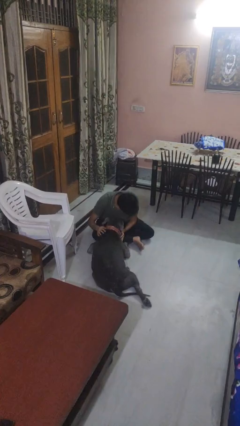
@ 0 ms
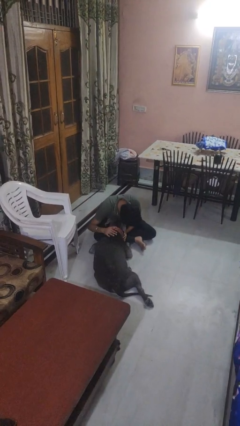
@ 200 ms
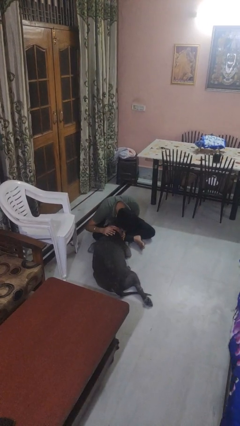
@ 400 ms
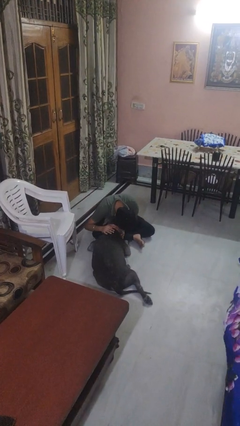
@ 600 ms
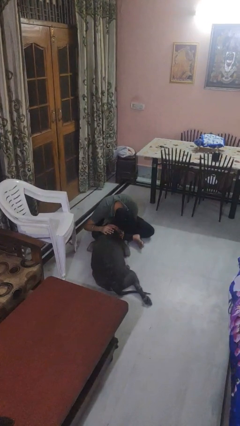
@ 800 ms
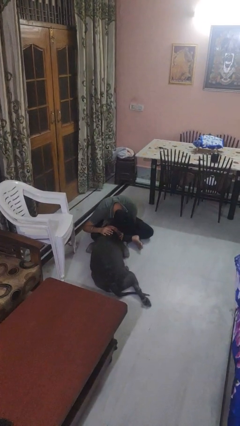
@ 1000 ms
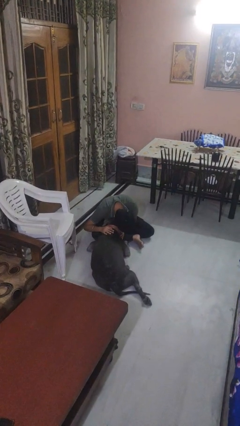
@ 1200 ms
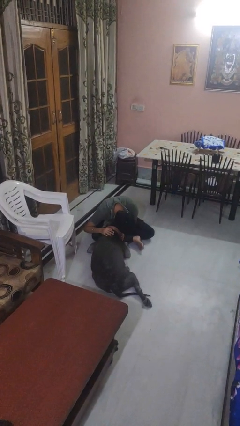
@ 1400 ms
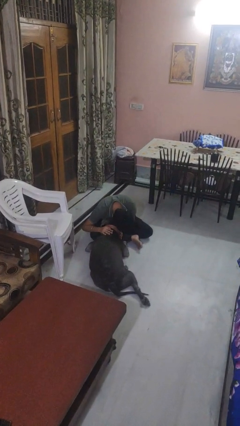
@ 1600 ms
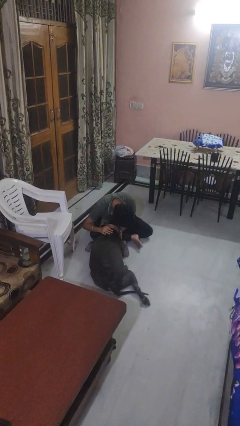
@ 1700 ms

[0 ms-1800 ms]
person hugs dog

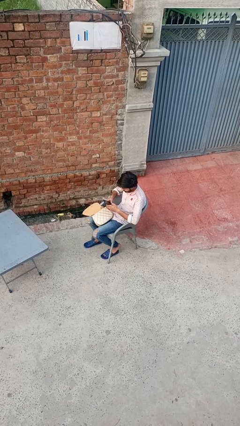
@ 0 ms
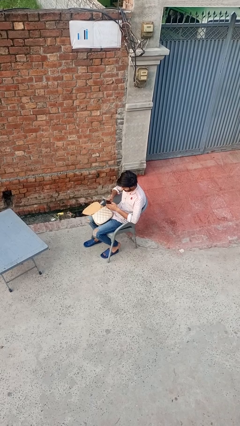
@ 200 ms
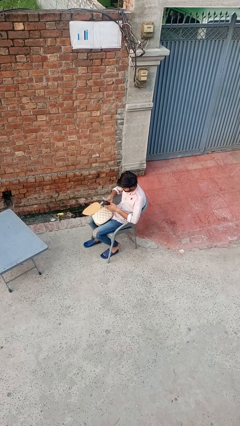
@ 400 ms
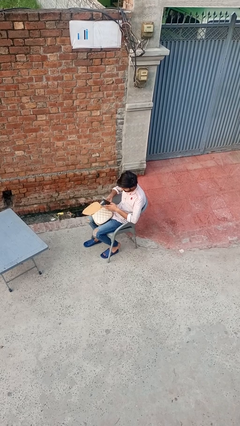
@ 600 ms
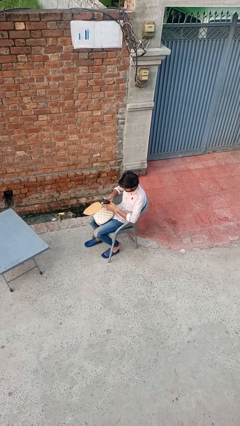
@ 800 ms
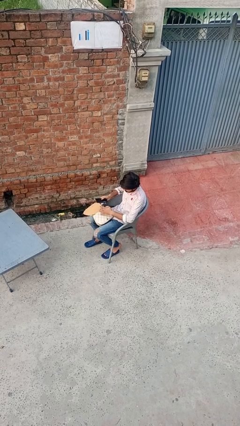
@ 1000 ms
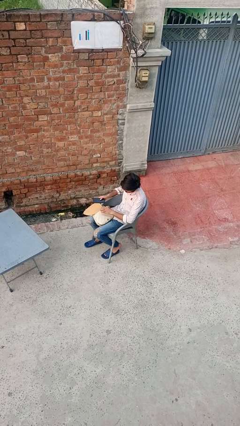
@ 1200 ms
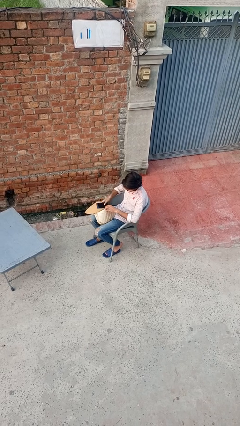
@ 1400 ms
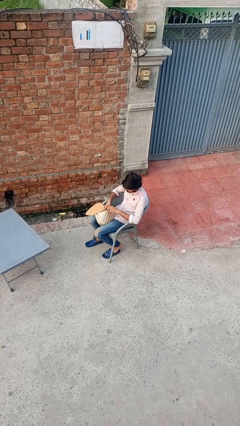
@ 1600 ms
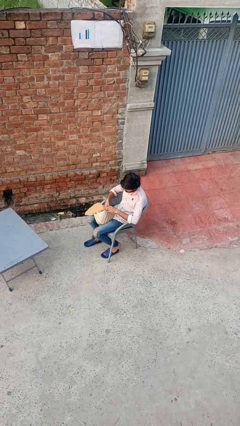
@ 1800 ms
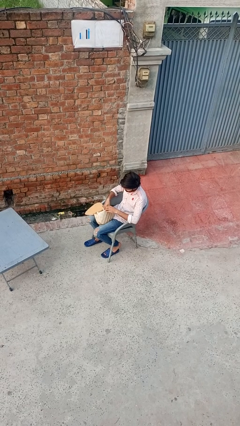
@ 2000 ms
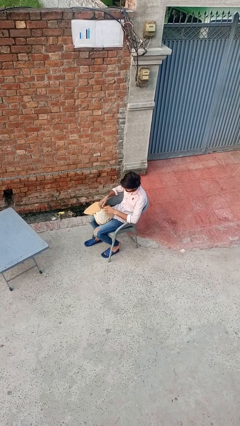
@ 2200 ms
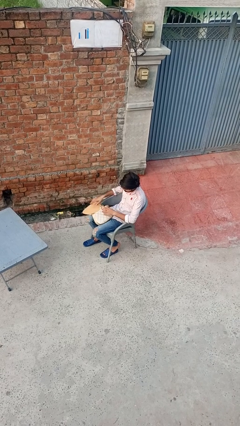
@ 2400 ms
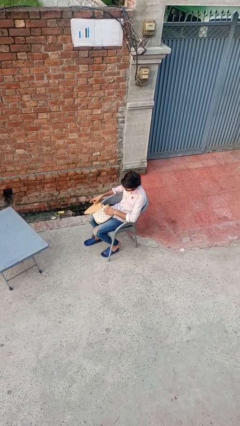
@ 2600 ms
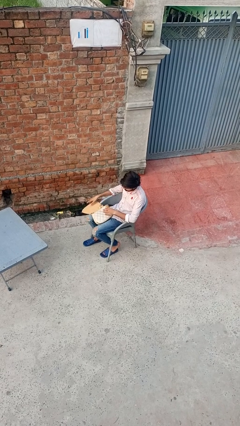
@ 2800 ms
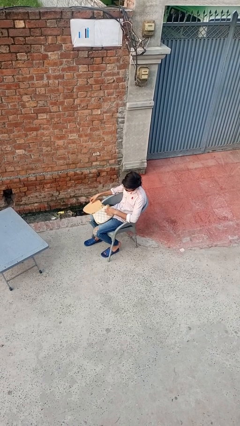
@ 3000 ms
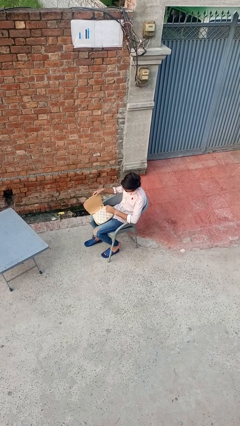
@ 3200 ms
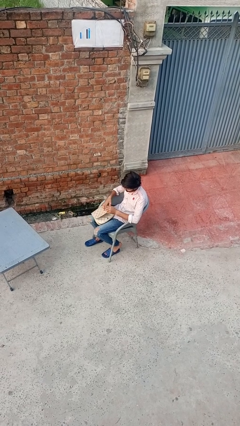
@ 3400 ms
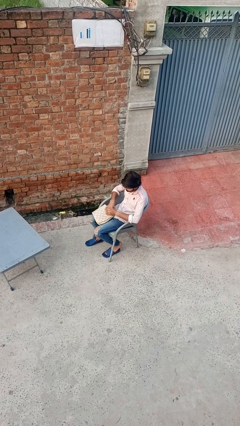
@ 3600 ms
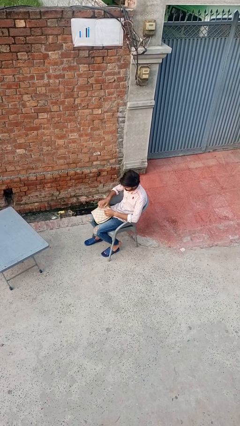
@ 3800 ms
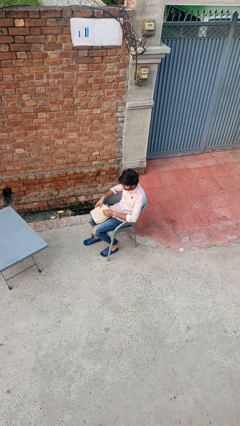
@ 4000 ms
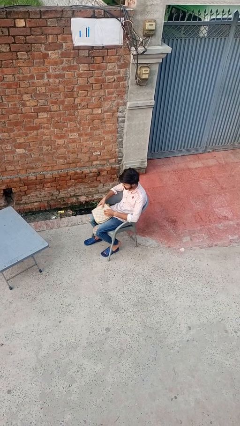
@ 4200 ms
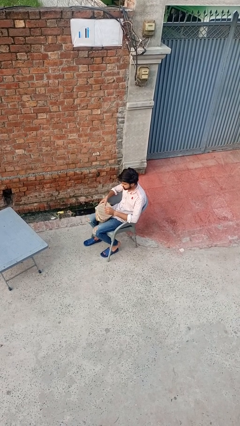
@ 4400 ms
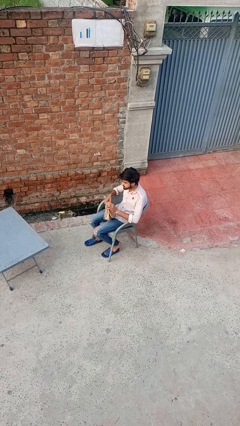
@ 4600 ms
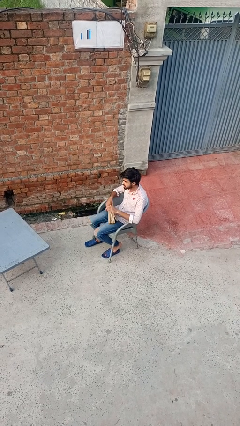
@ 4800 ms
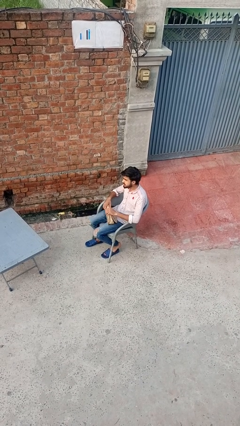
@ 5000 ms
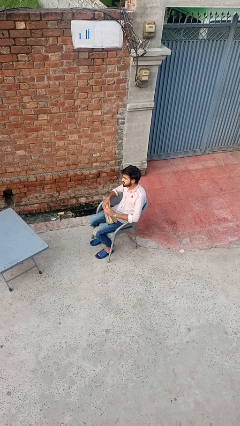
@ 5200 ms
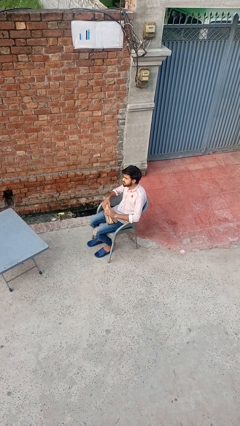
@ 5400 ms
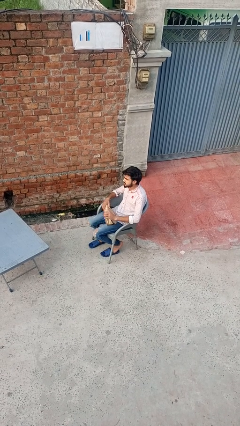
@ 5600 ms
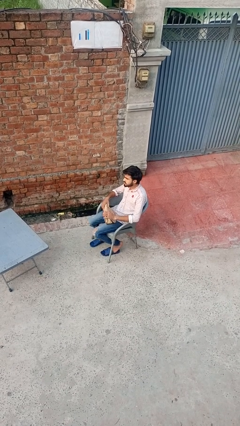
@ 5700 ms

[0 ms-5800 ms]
person puts object into purse

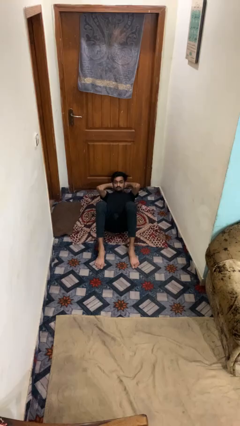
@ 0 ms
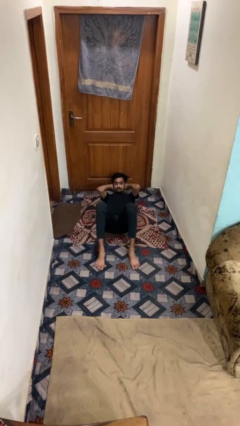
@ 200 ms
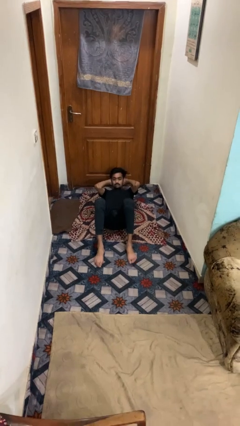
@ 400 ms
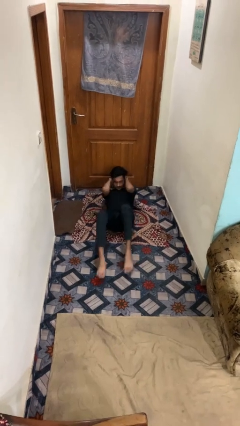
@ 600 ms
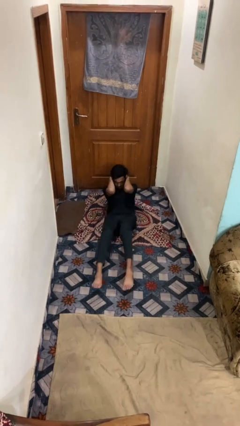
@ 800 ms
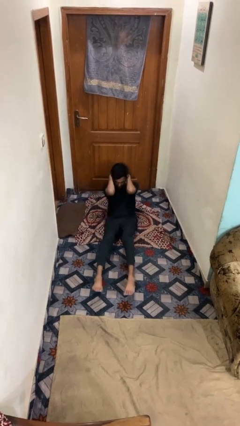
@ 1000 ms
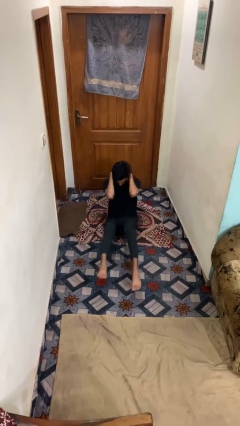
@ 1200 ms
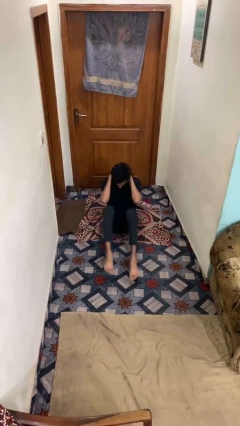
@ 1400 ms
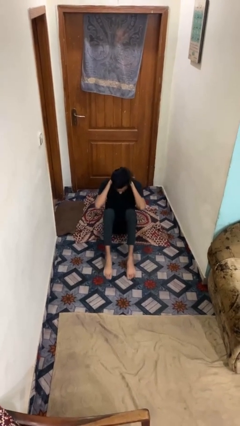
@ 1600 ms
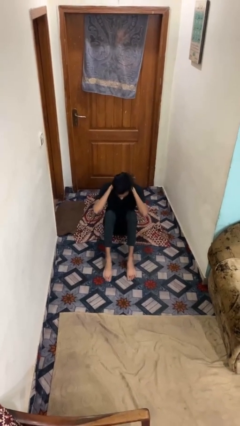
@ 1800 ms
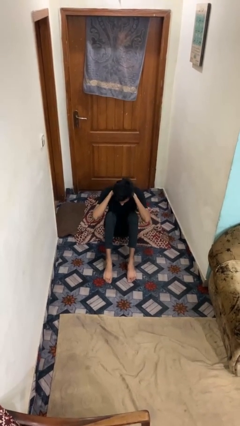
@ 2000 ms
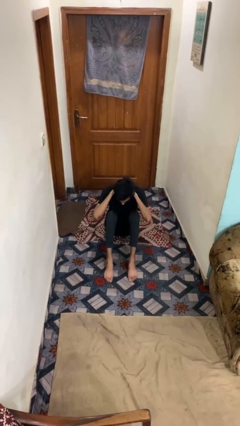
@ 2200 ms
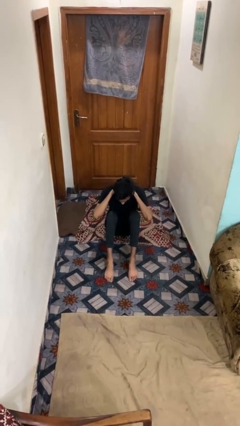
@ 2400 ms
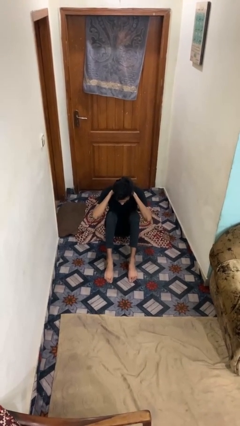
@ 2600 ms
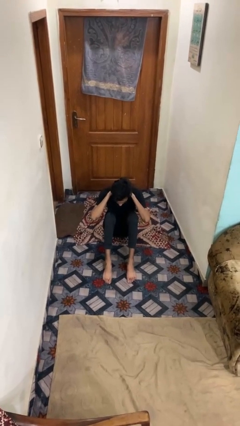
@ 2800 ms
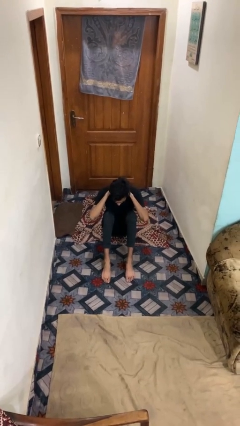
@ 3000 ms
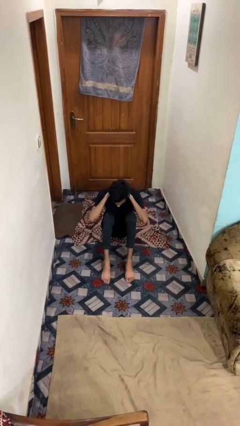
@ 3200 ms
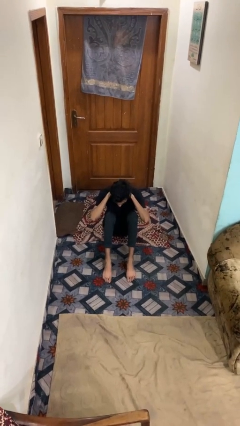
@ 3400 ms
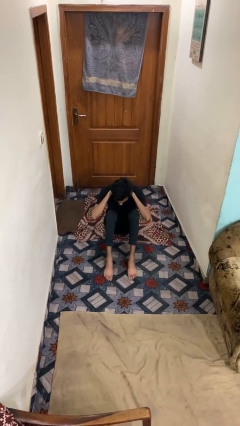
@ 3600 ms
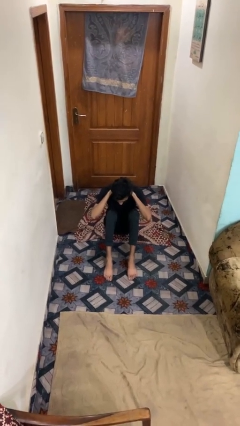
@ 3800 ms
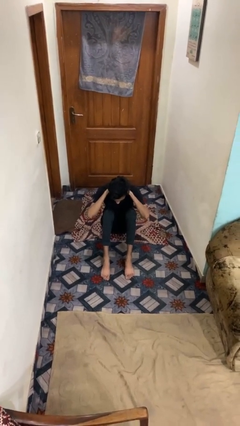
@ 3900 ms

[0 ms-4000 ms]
person exercises with situp

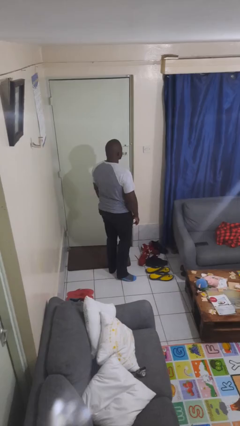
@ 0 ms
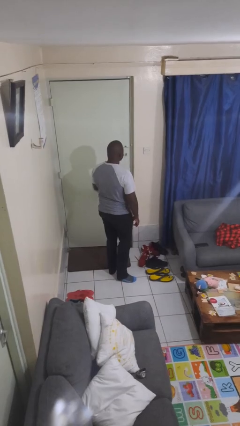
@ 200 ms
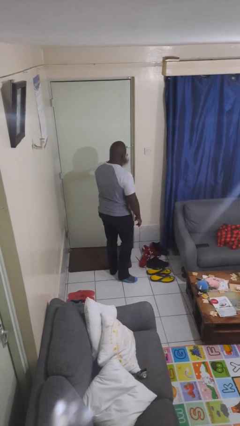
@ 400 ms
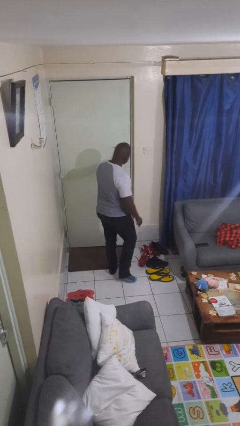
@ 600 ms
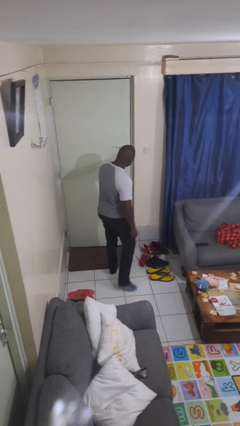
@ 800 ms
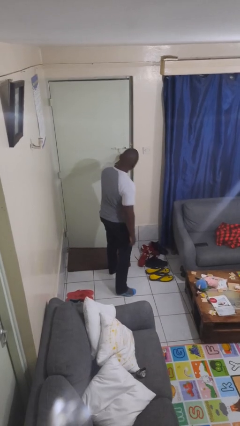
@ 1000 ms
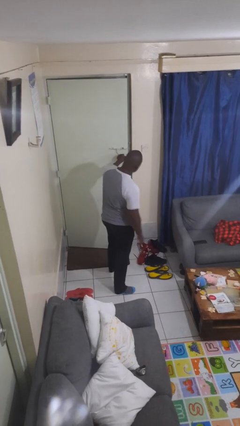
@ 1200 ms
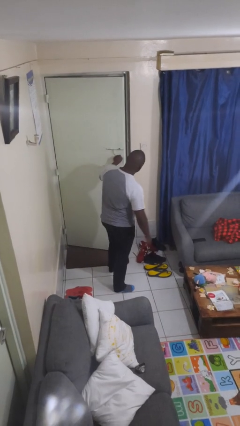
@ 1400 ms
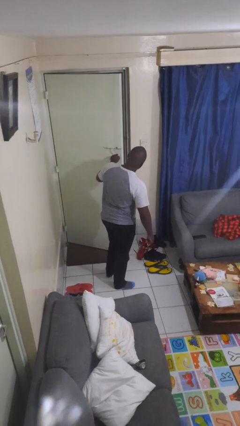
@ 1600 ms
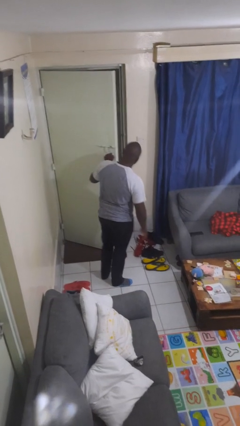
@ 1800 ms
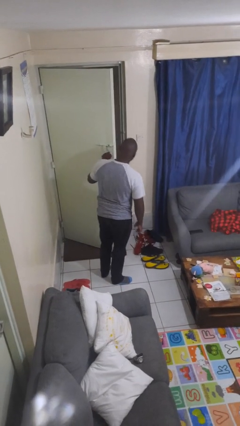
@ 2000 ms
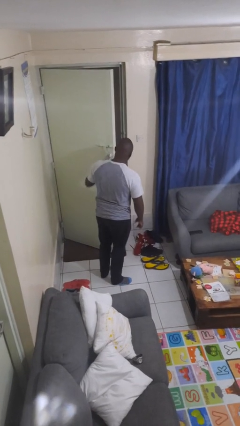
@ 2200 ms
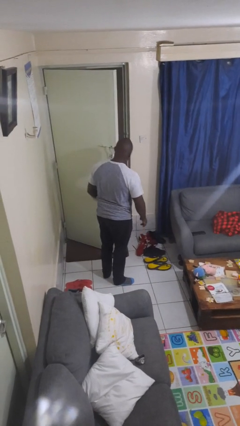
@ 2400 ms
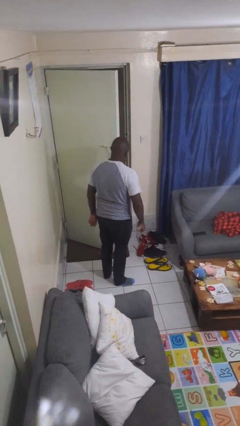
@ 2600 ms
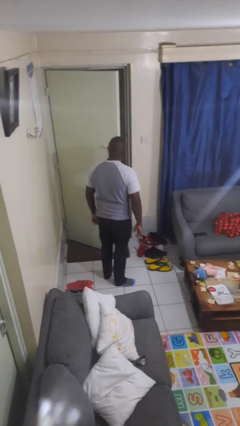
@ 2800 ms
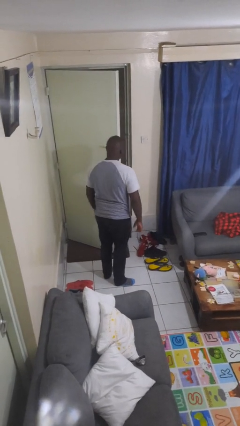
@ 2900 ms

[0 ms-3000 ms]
person opens facility door

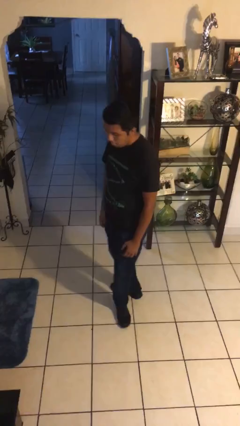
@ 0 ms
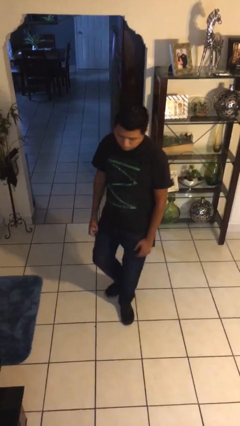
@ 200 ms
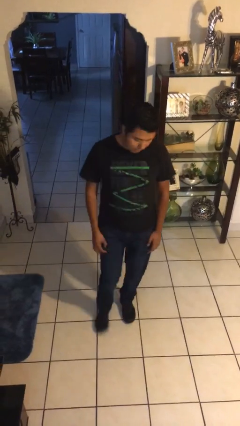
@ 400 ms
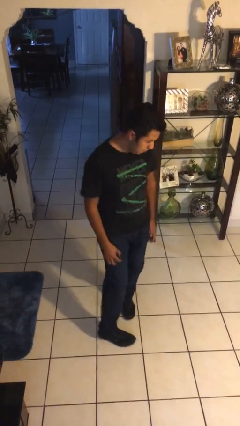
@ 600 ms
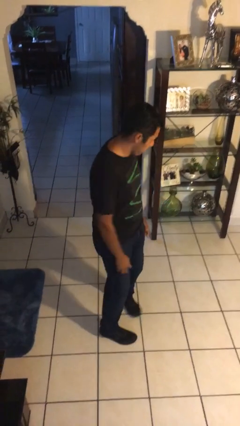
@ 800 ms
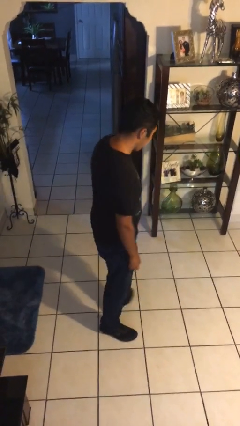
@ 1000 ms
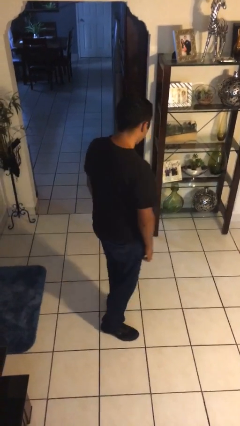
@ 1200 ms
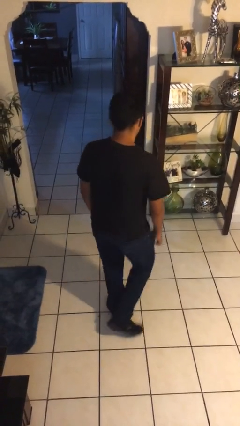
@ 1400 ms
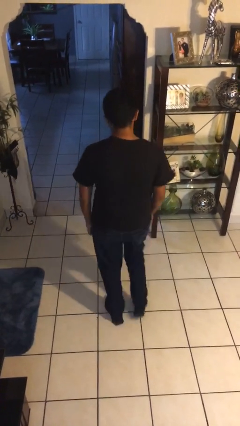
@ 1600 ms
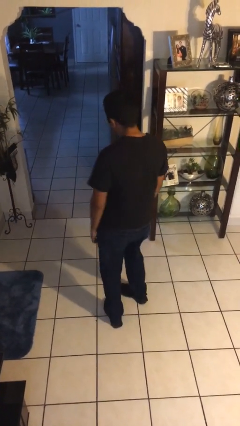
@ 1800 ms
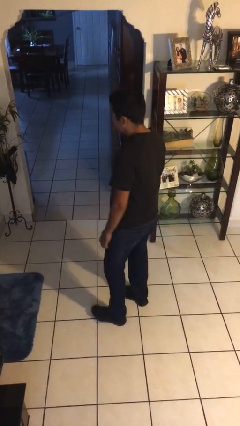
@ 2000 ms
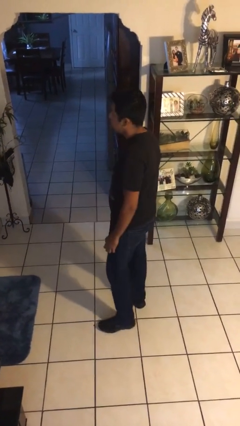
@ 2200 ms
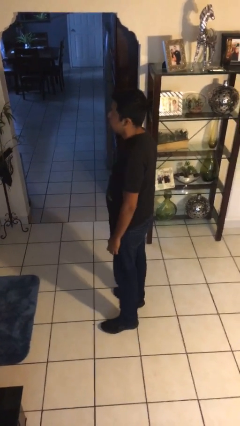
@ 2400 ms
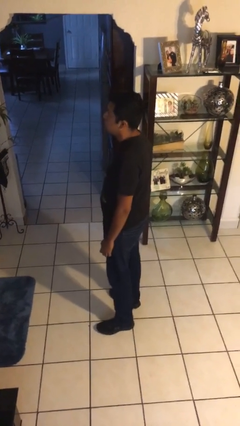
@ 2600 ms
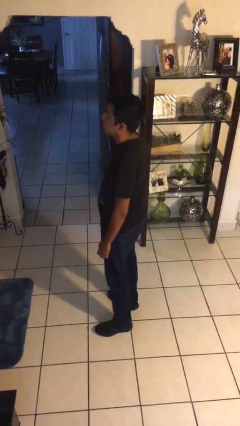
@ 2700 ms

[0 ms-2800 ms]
person twirls
